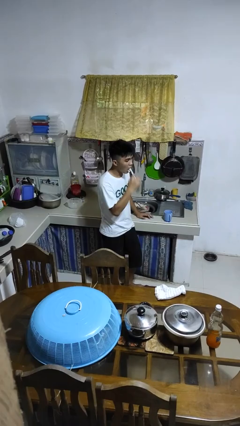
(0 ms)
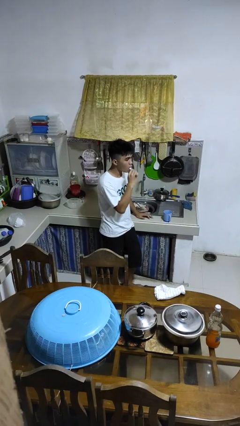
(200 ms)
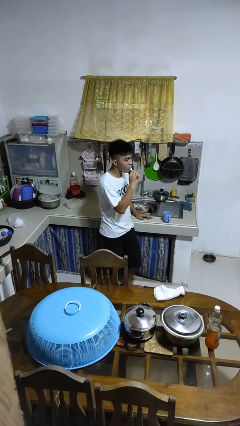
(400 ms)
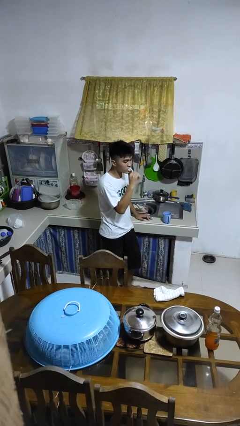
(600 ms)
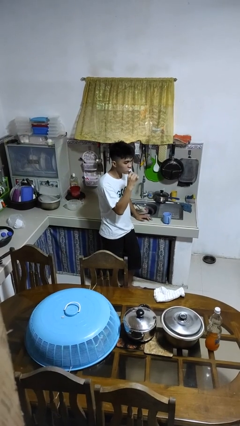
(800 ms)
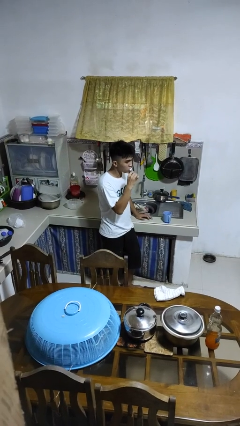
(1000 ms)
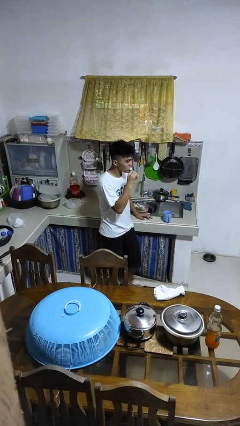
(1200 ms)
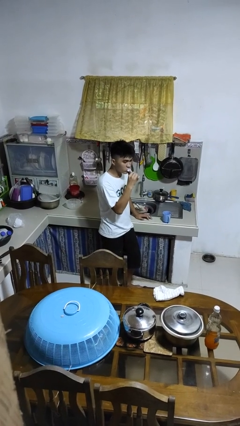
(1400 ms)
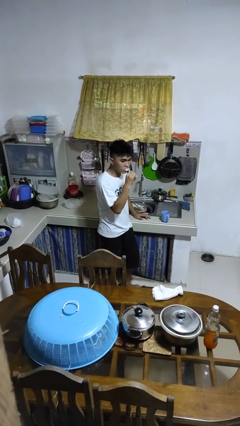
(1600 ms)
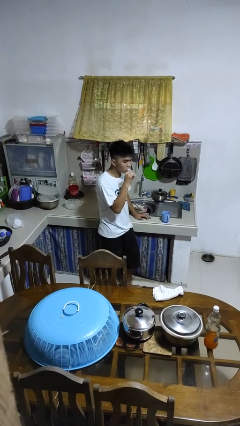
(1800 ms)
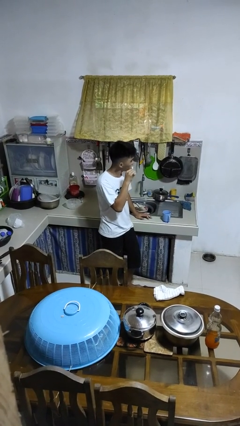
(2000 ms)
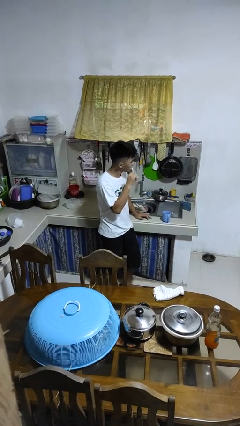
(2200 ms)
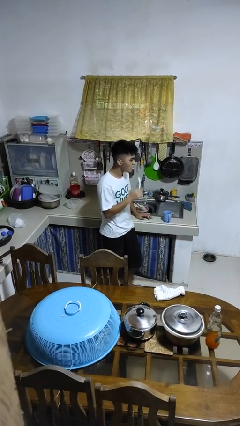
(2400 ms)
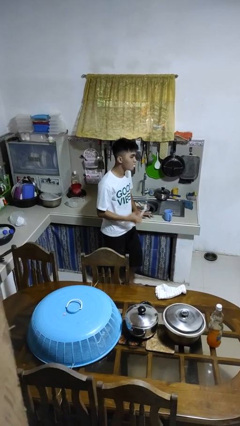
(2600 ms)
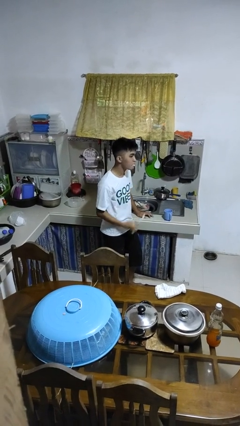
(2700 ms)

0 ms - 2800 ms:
person brushes teeth

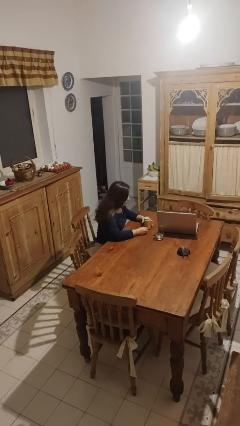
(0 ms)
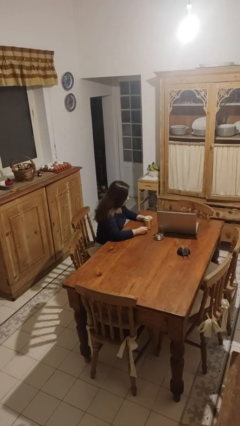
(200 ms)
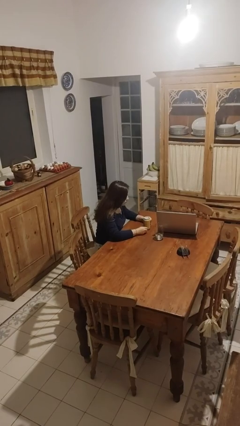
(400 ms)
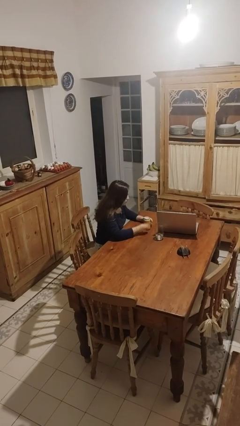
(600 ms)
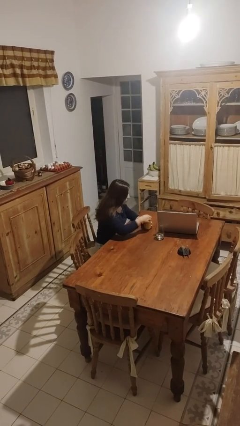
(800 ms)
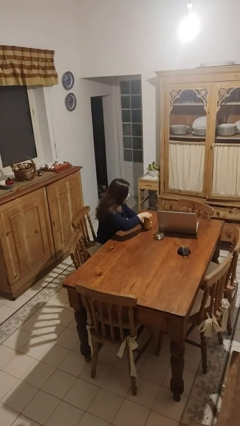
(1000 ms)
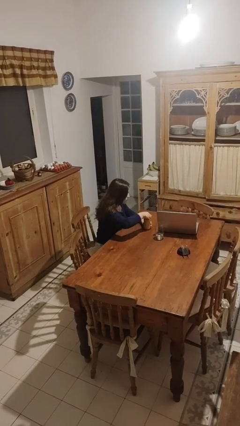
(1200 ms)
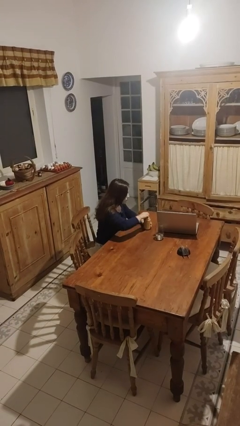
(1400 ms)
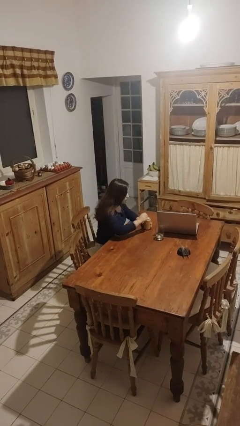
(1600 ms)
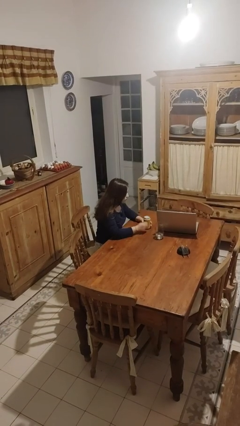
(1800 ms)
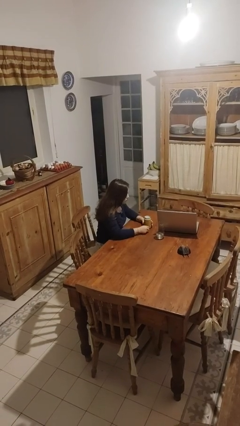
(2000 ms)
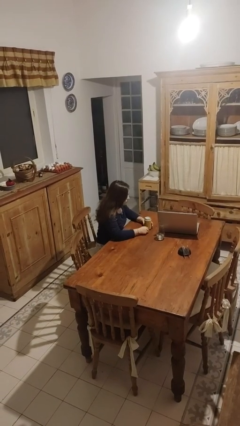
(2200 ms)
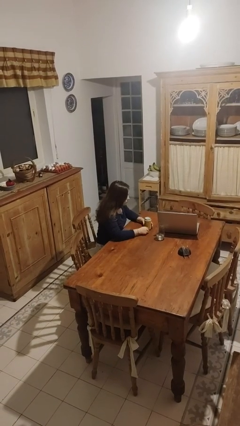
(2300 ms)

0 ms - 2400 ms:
person opens beverage can

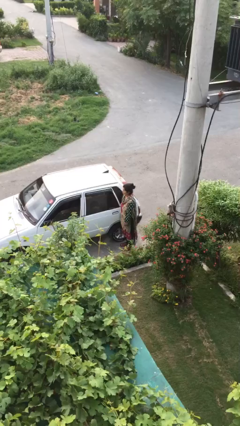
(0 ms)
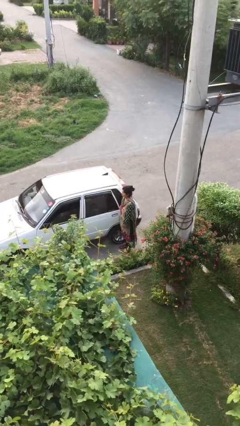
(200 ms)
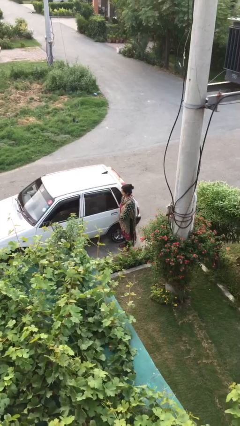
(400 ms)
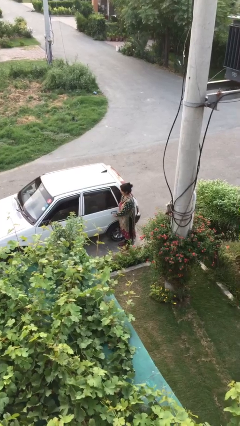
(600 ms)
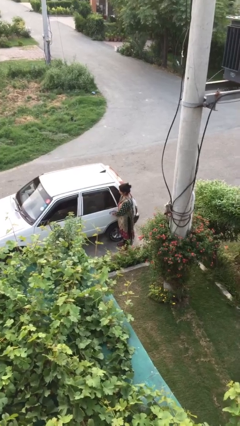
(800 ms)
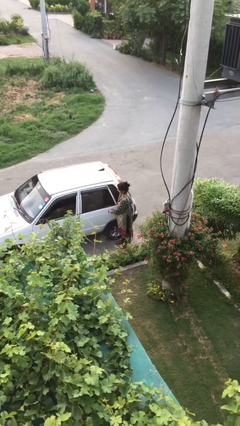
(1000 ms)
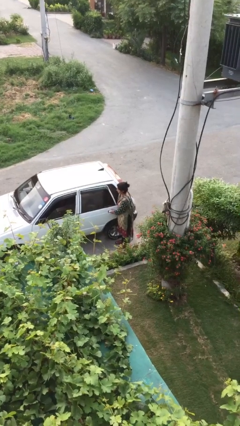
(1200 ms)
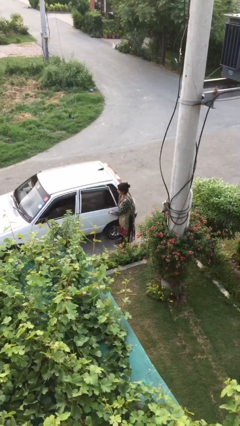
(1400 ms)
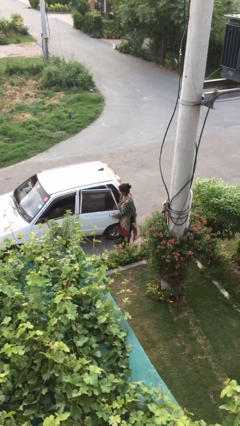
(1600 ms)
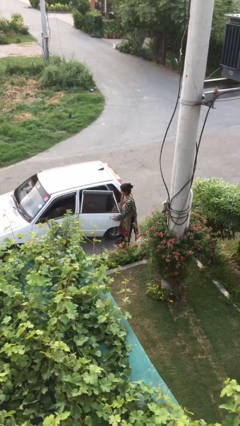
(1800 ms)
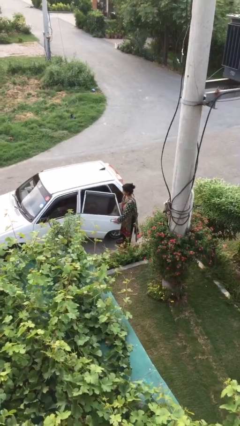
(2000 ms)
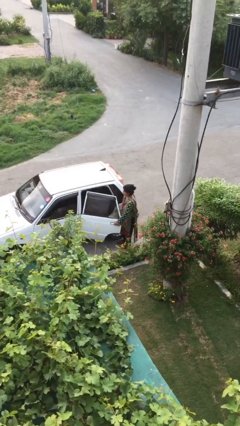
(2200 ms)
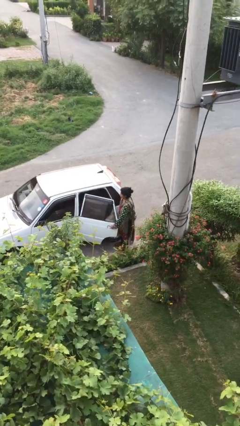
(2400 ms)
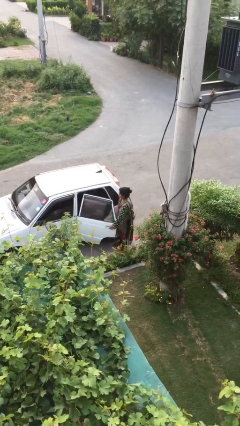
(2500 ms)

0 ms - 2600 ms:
person opens car door

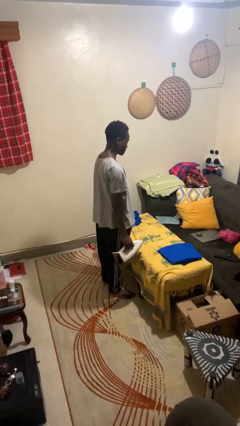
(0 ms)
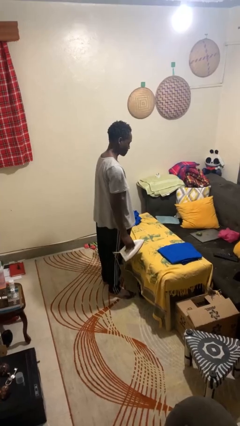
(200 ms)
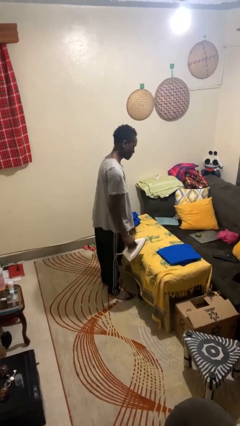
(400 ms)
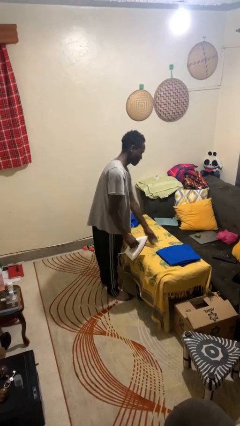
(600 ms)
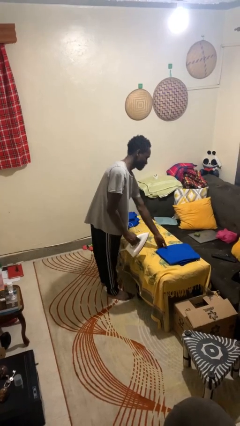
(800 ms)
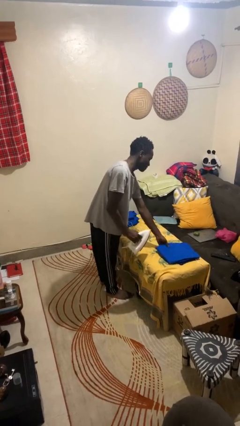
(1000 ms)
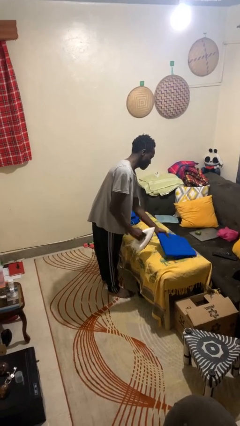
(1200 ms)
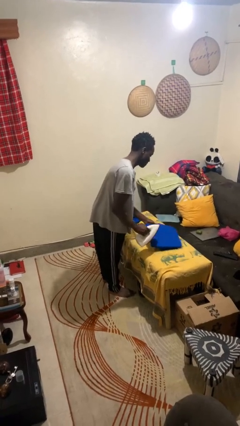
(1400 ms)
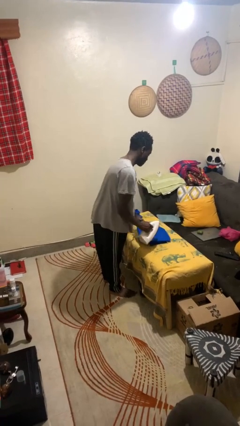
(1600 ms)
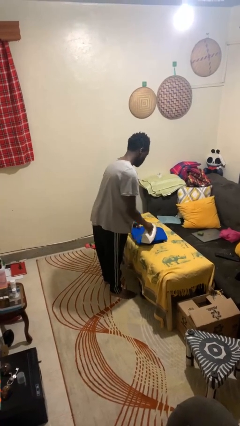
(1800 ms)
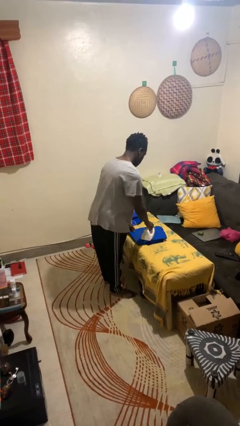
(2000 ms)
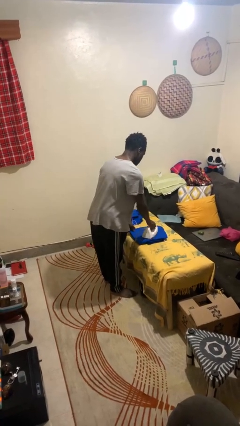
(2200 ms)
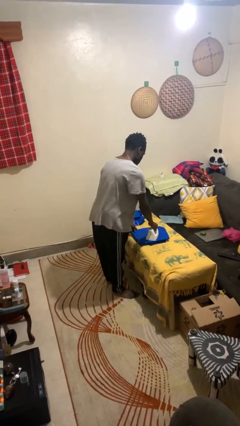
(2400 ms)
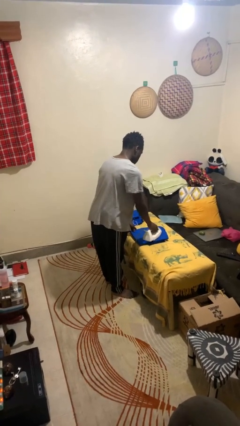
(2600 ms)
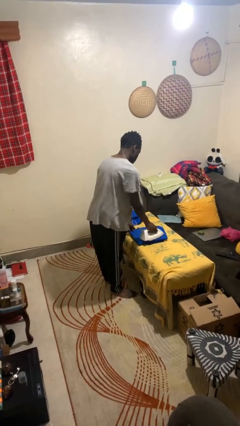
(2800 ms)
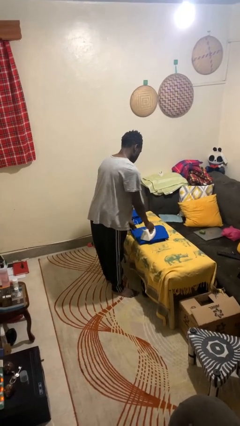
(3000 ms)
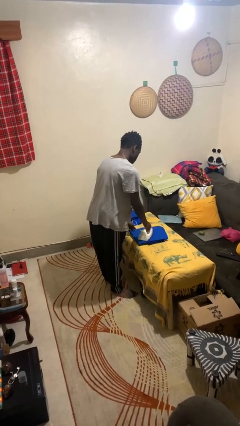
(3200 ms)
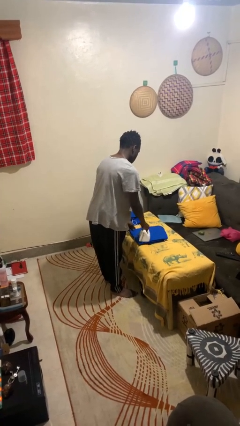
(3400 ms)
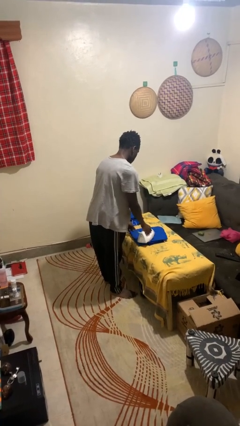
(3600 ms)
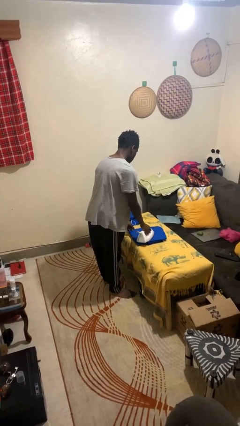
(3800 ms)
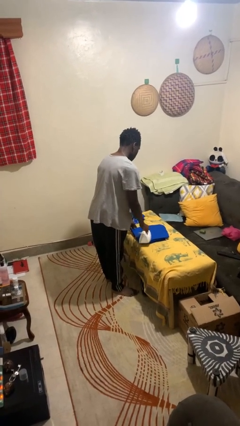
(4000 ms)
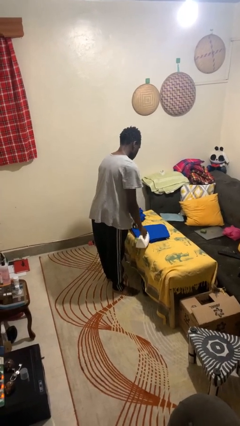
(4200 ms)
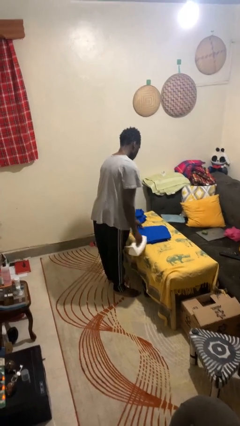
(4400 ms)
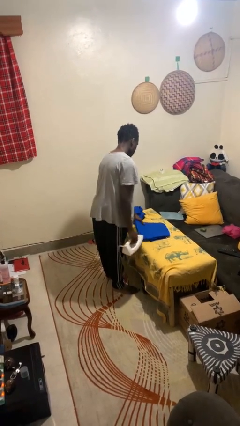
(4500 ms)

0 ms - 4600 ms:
person irons clothes

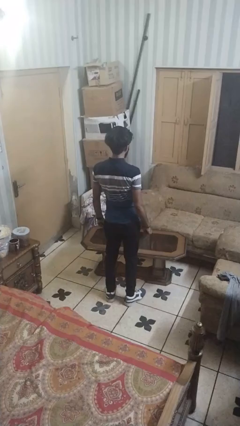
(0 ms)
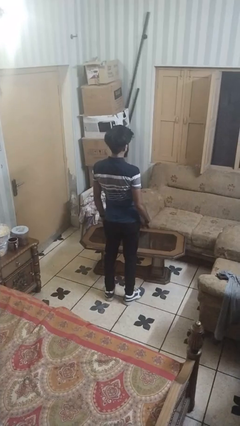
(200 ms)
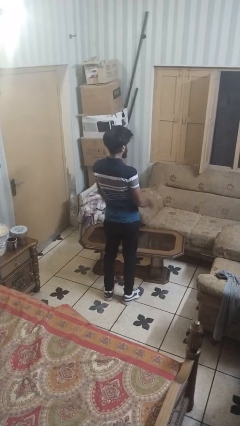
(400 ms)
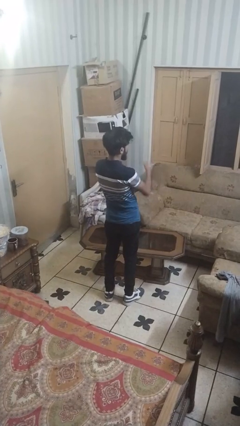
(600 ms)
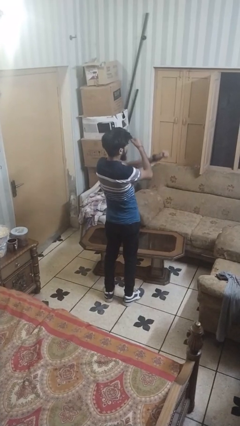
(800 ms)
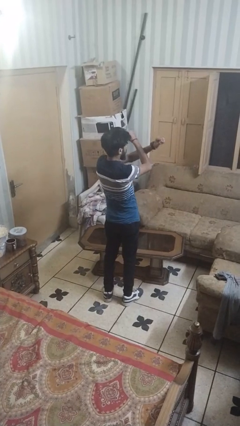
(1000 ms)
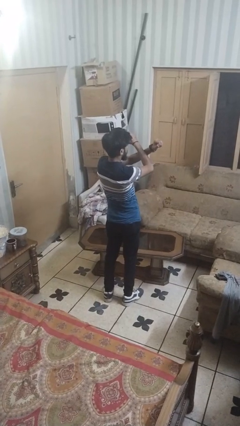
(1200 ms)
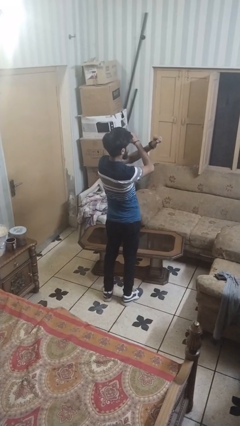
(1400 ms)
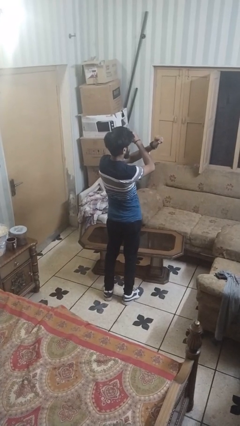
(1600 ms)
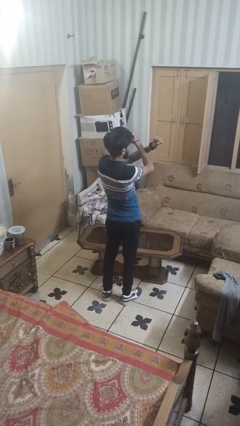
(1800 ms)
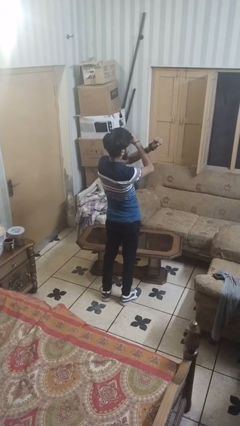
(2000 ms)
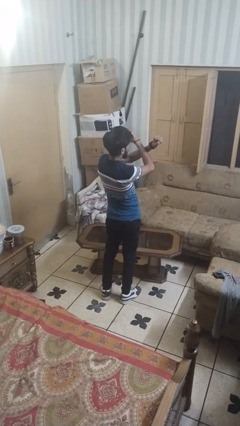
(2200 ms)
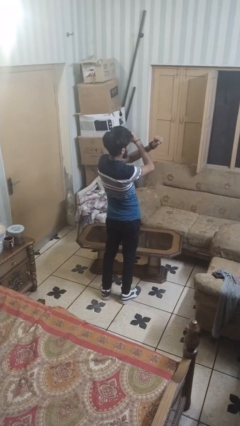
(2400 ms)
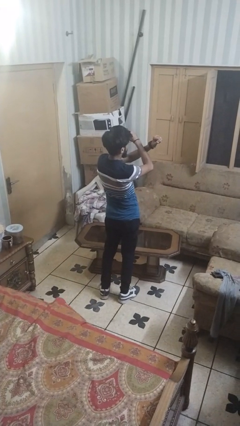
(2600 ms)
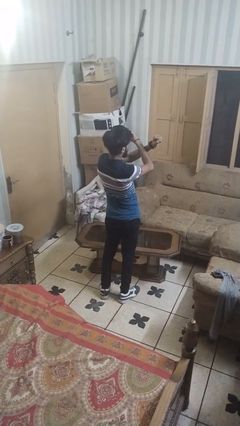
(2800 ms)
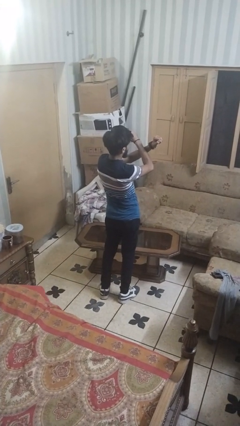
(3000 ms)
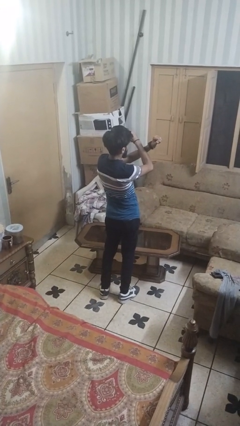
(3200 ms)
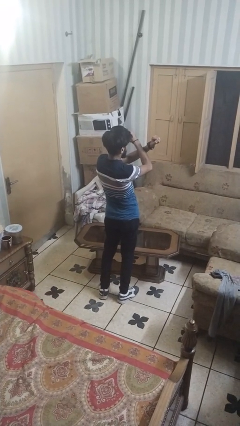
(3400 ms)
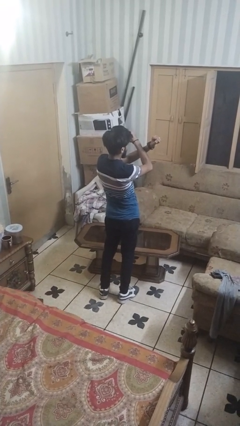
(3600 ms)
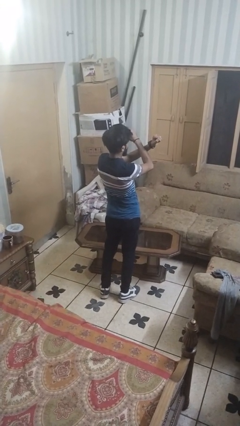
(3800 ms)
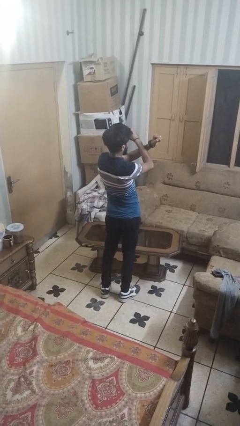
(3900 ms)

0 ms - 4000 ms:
person gestures arms x

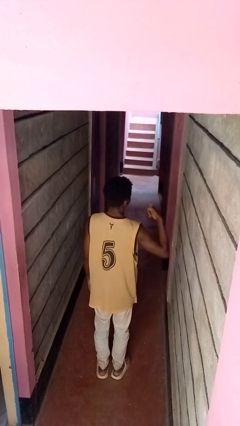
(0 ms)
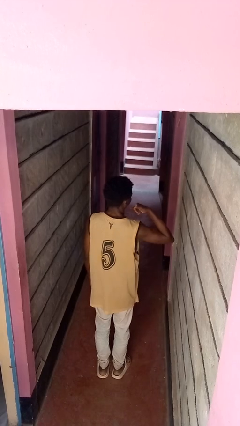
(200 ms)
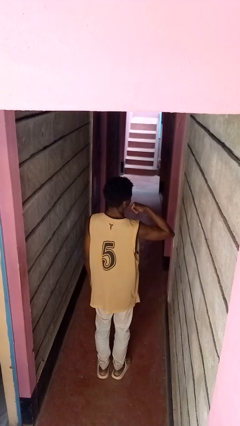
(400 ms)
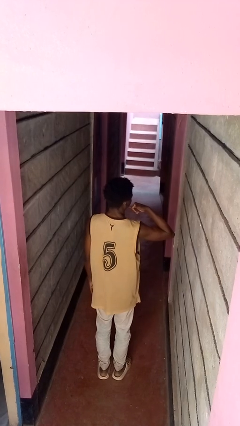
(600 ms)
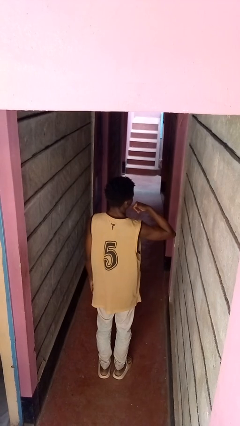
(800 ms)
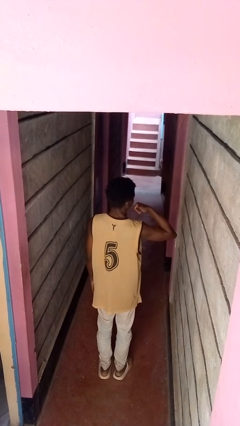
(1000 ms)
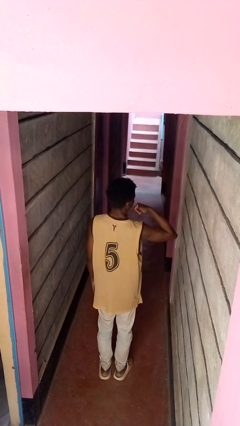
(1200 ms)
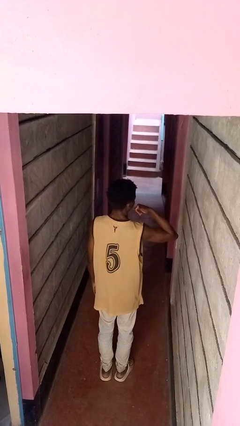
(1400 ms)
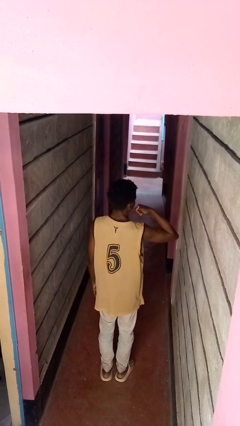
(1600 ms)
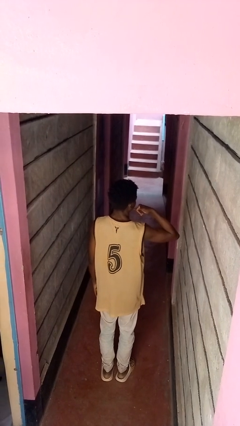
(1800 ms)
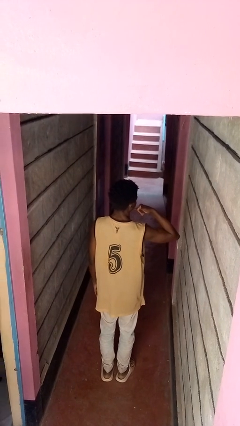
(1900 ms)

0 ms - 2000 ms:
person gestures call me
